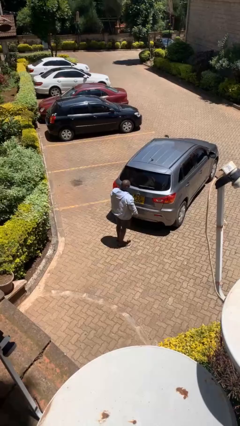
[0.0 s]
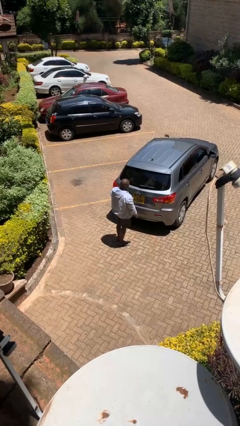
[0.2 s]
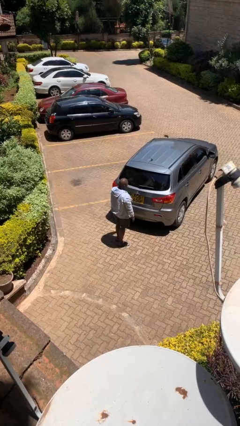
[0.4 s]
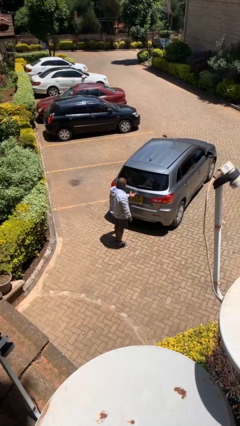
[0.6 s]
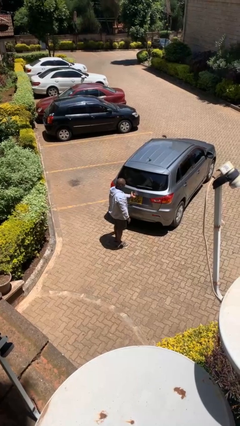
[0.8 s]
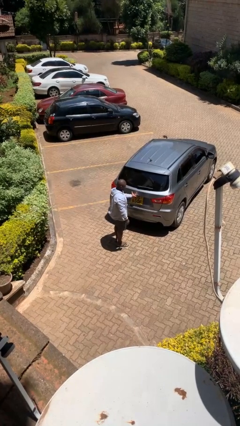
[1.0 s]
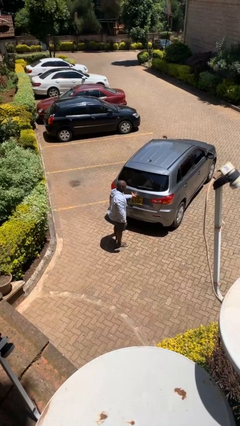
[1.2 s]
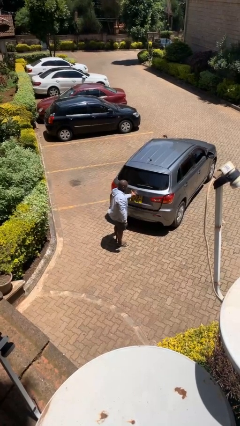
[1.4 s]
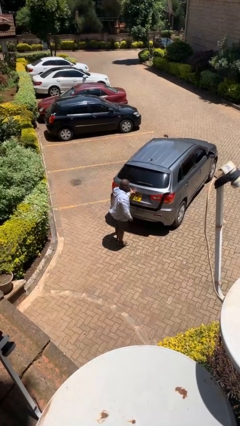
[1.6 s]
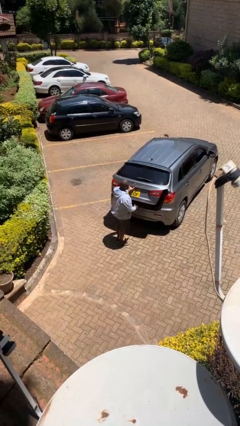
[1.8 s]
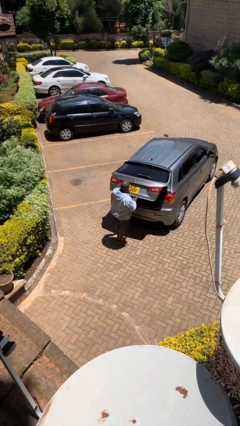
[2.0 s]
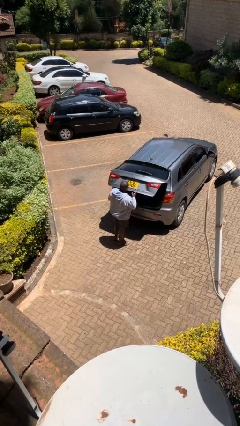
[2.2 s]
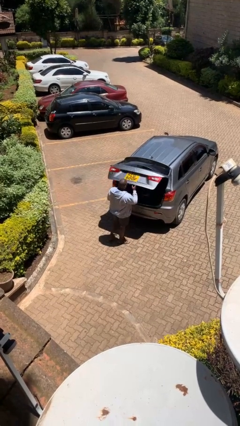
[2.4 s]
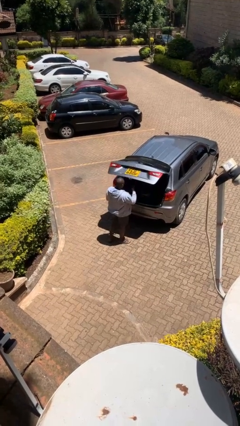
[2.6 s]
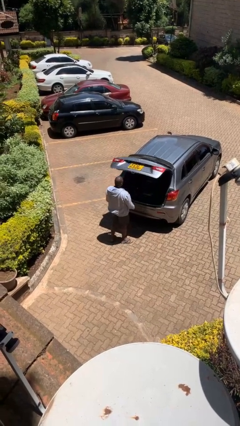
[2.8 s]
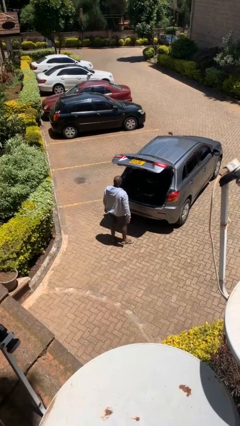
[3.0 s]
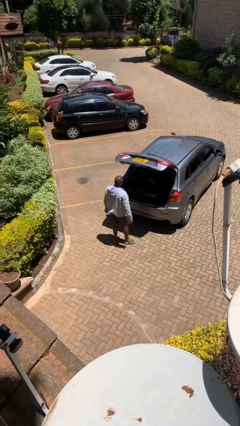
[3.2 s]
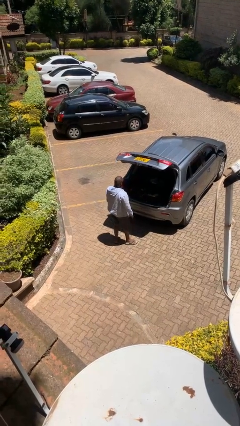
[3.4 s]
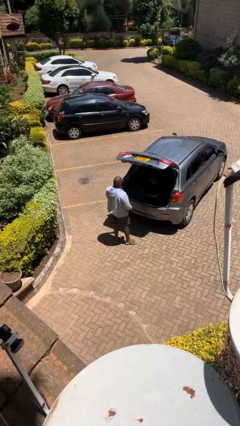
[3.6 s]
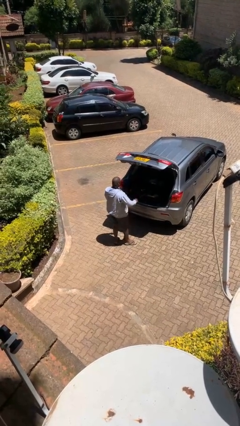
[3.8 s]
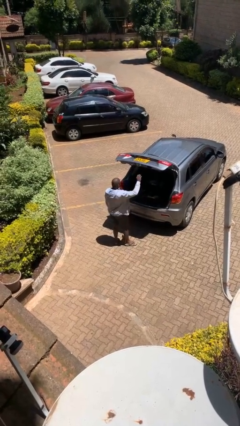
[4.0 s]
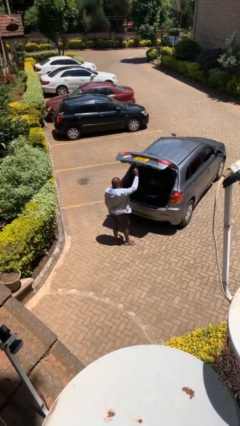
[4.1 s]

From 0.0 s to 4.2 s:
person opens car trunk

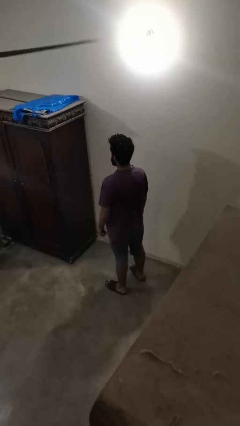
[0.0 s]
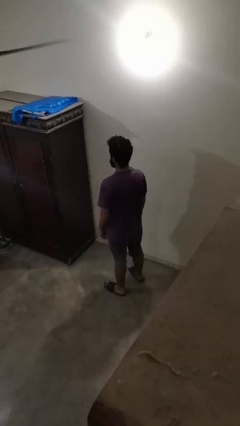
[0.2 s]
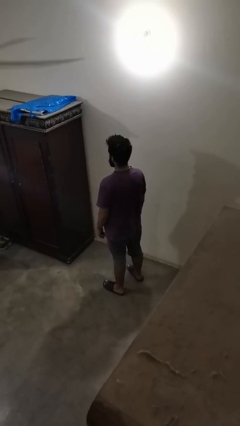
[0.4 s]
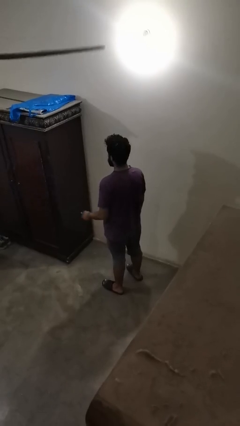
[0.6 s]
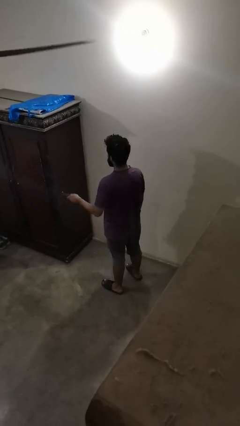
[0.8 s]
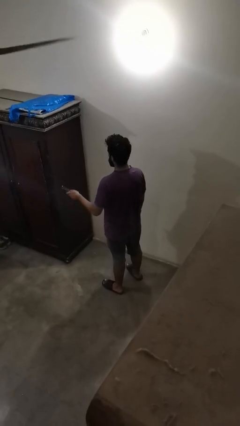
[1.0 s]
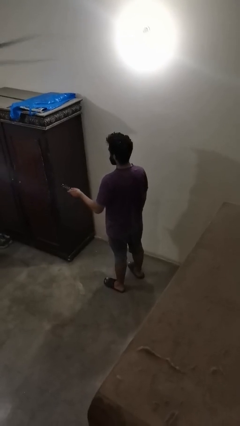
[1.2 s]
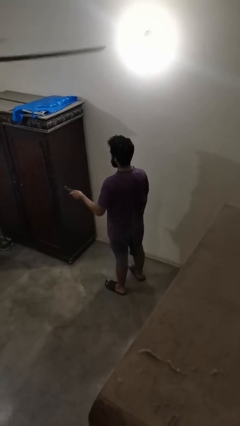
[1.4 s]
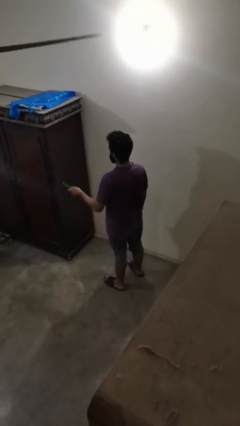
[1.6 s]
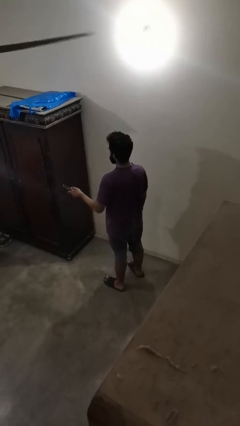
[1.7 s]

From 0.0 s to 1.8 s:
person uses television remote

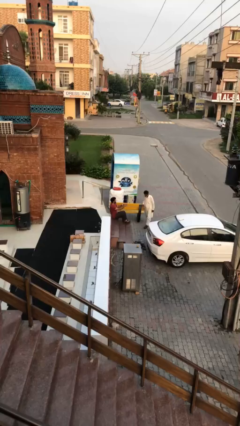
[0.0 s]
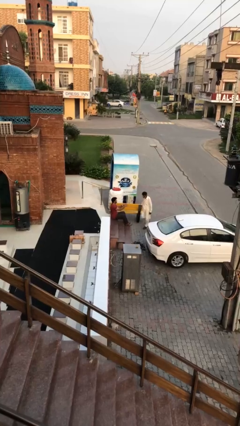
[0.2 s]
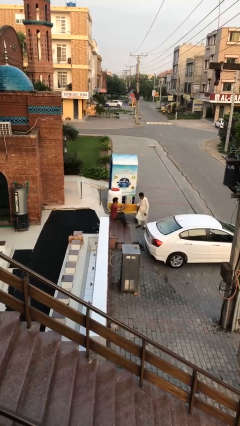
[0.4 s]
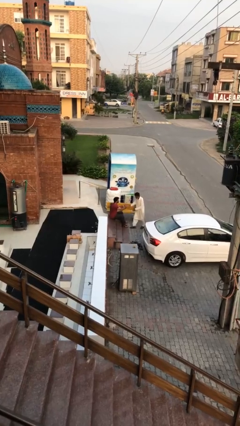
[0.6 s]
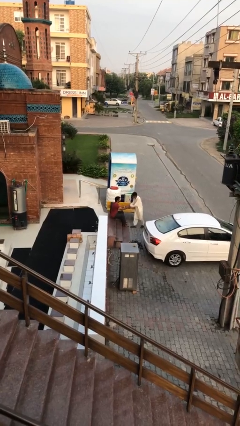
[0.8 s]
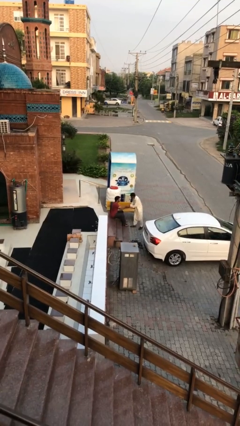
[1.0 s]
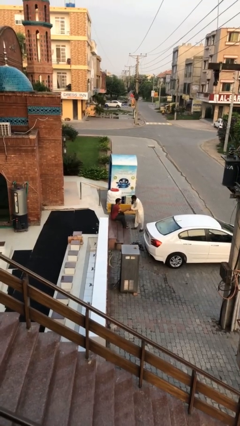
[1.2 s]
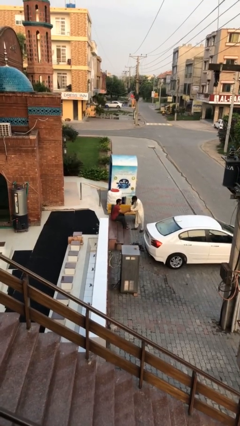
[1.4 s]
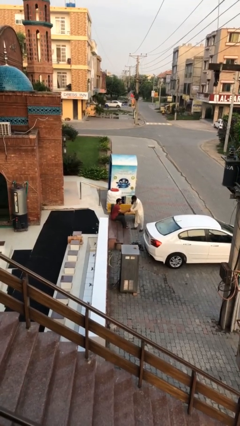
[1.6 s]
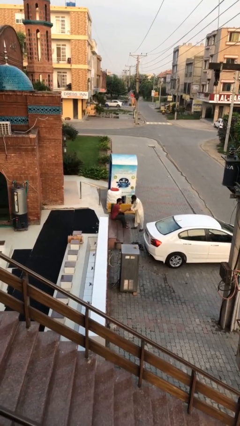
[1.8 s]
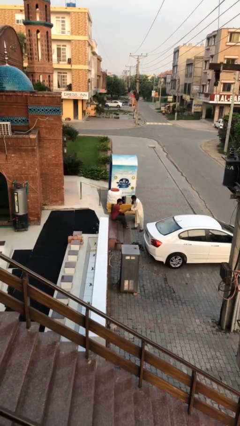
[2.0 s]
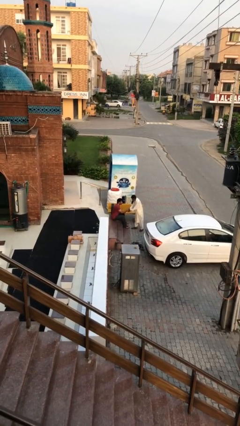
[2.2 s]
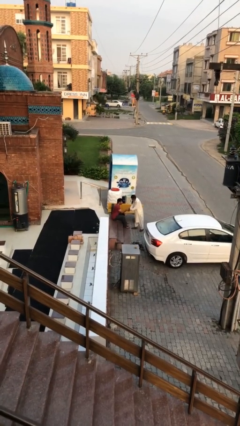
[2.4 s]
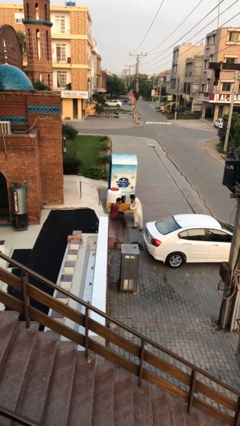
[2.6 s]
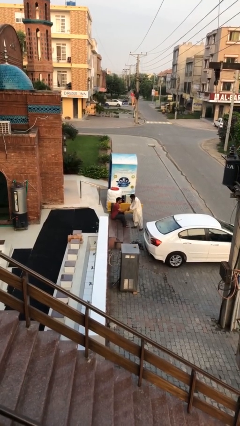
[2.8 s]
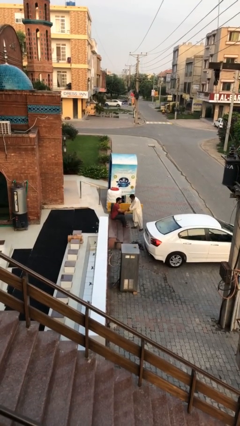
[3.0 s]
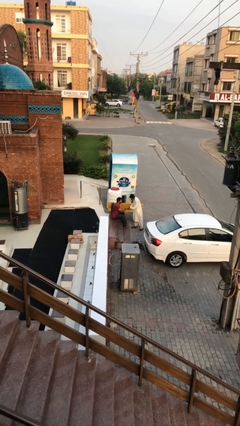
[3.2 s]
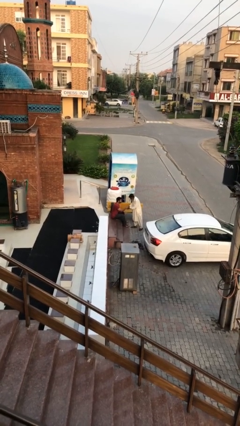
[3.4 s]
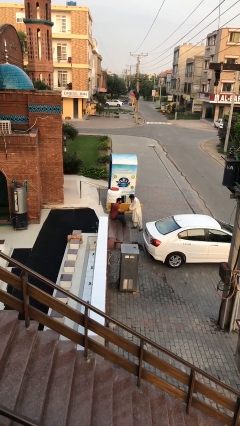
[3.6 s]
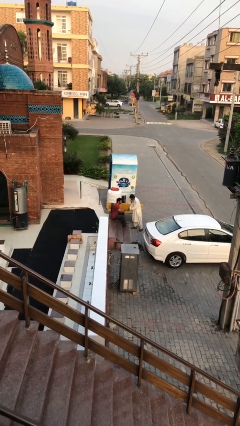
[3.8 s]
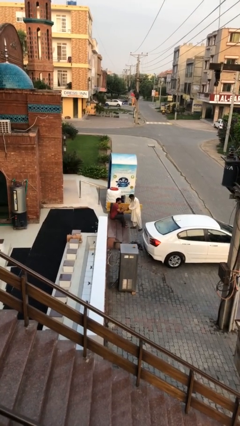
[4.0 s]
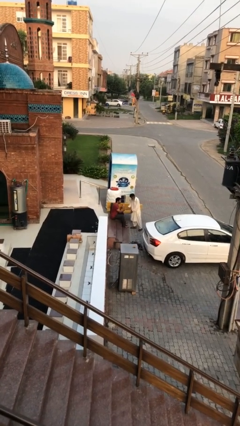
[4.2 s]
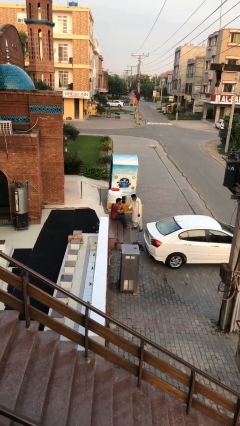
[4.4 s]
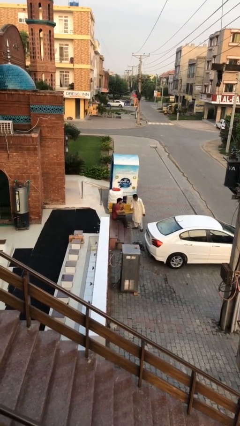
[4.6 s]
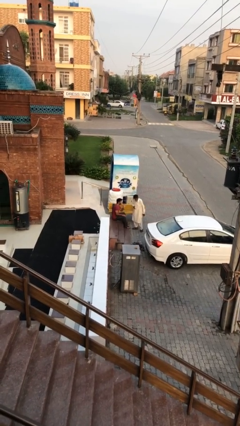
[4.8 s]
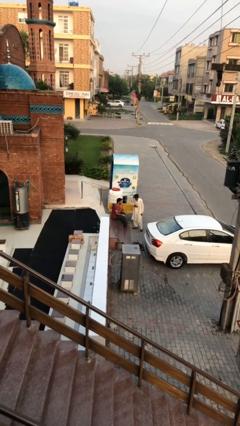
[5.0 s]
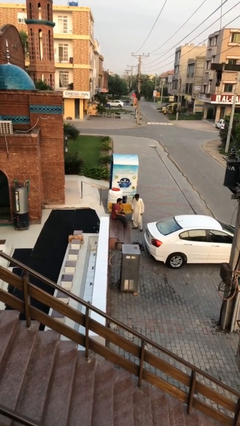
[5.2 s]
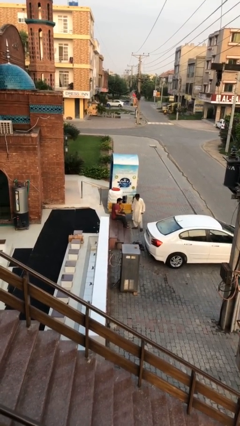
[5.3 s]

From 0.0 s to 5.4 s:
person shakes hand

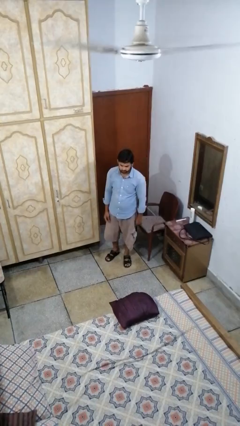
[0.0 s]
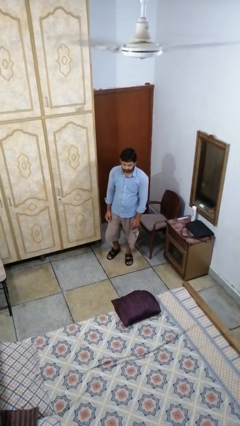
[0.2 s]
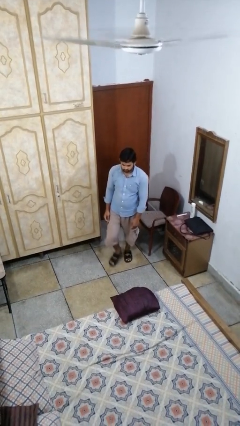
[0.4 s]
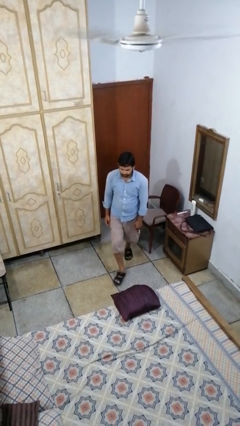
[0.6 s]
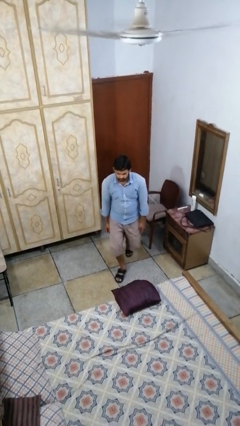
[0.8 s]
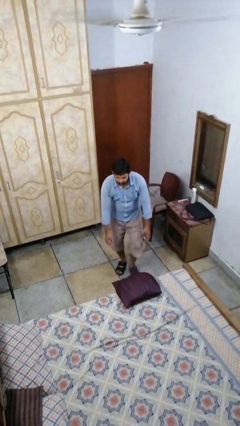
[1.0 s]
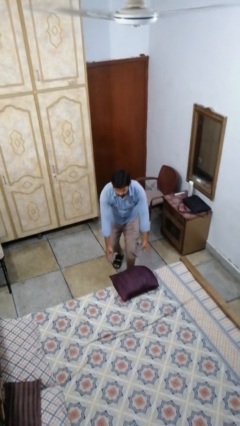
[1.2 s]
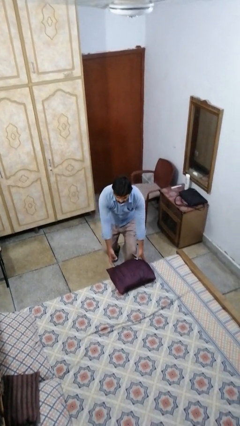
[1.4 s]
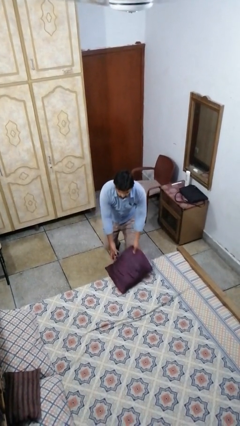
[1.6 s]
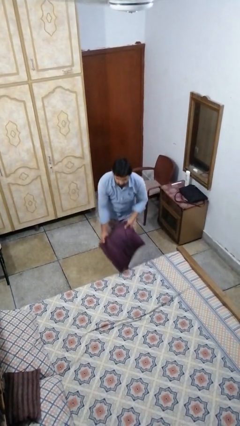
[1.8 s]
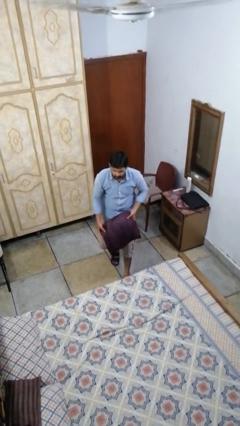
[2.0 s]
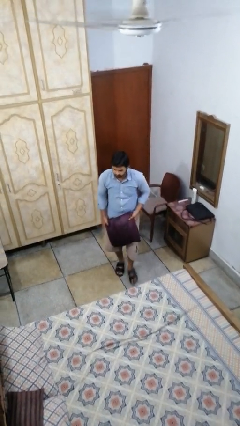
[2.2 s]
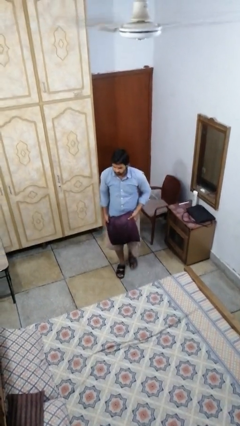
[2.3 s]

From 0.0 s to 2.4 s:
person picks up object from bed

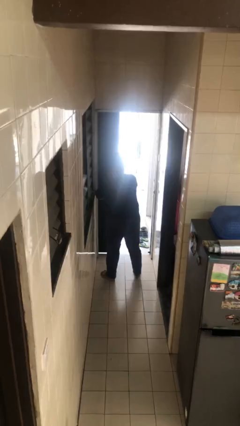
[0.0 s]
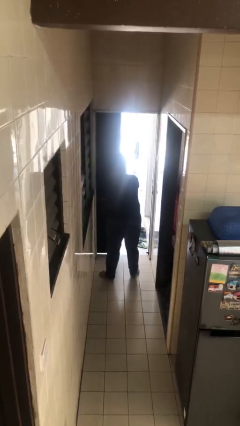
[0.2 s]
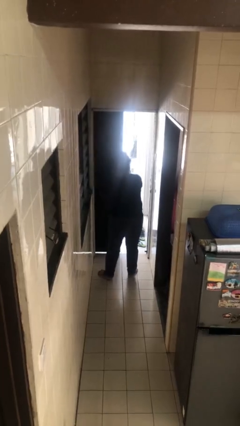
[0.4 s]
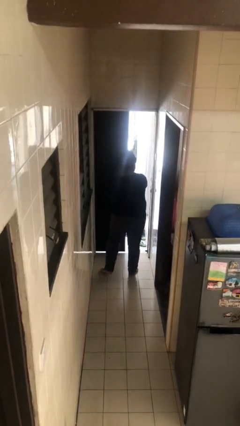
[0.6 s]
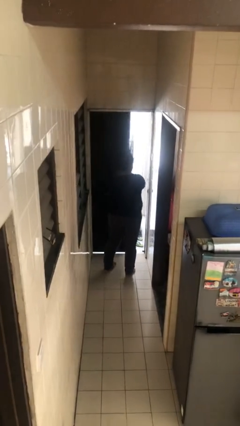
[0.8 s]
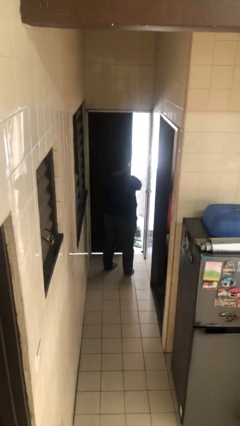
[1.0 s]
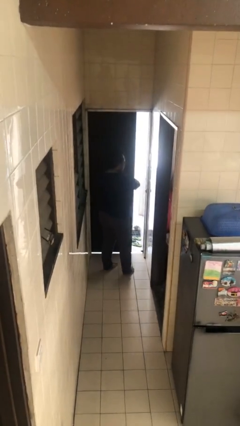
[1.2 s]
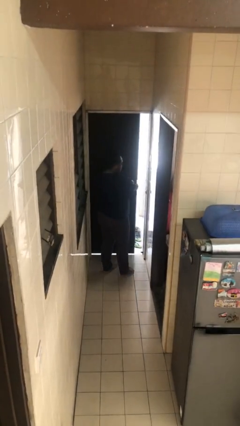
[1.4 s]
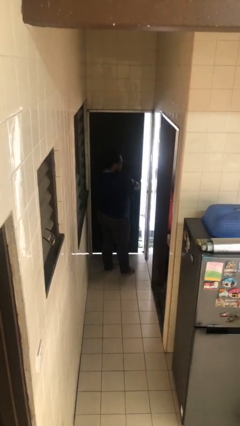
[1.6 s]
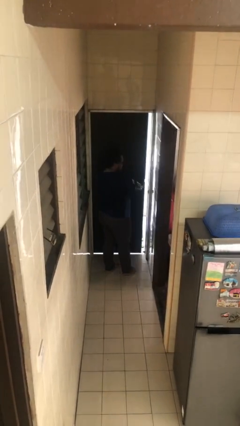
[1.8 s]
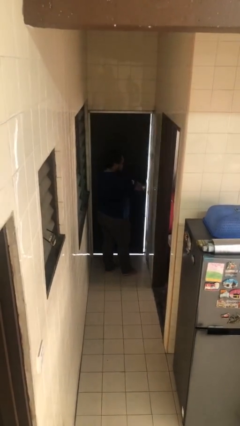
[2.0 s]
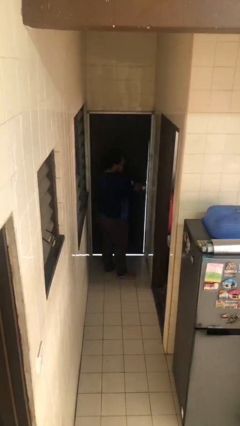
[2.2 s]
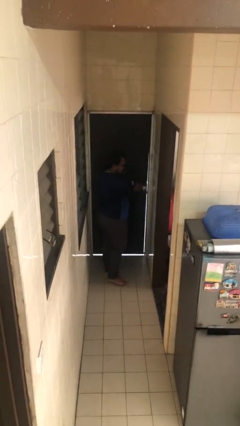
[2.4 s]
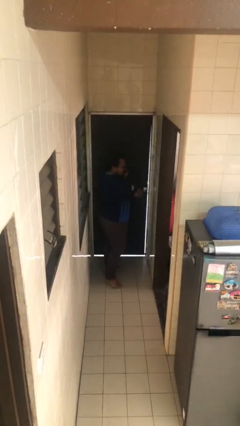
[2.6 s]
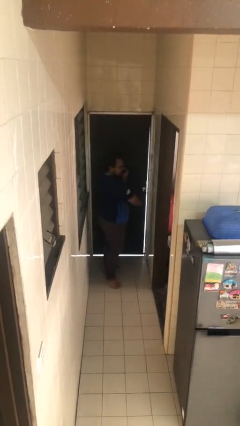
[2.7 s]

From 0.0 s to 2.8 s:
person closes facility door

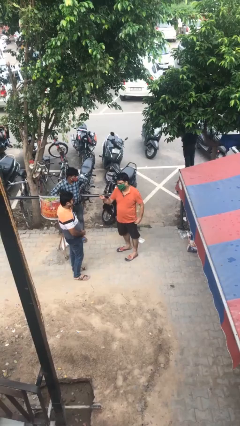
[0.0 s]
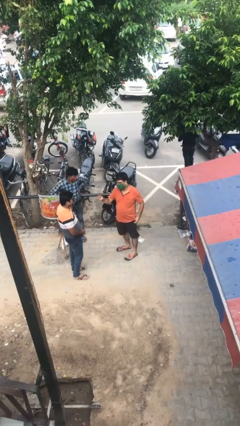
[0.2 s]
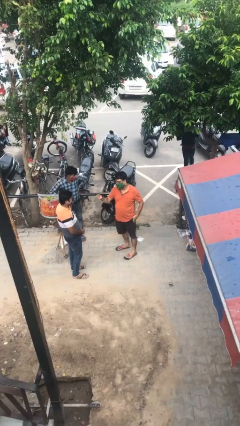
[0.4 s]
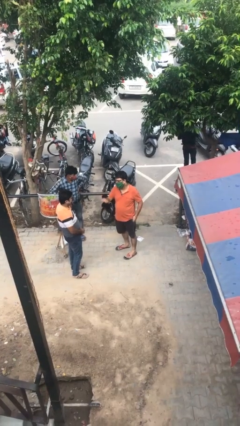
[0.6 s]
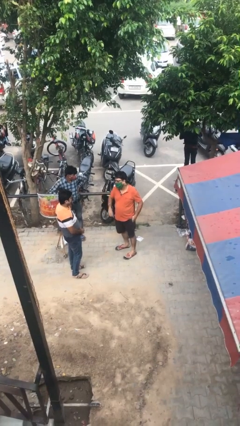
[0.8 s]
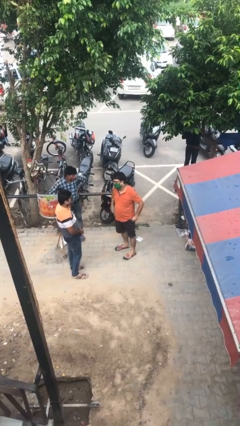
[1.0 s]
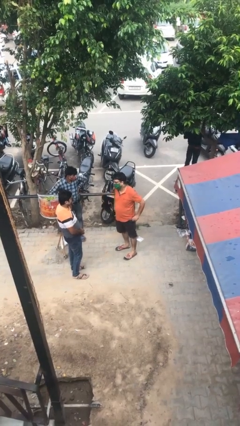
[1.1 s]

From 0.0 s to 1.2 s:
person points at person
